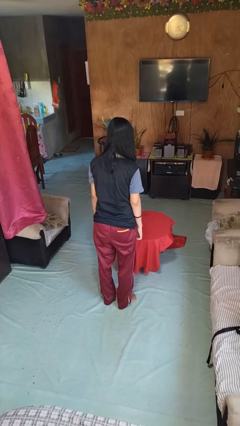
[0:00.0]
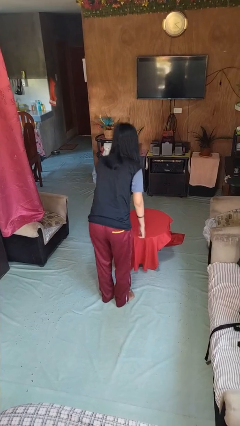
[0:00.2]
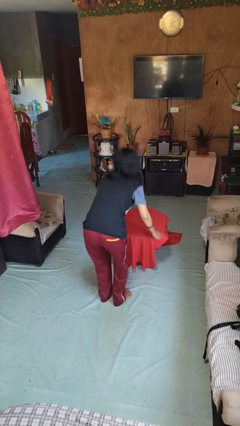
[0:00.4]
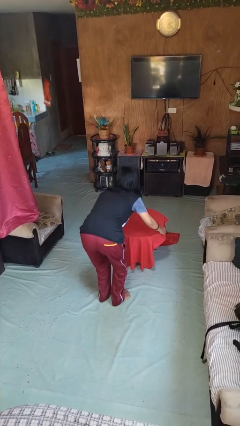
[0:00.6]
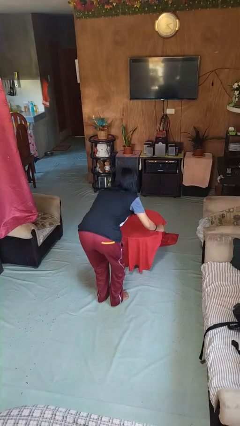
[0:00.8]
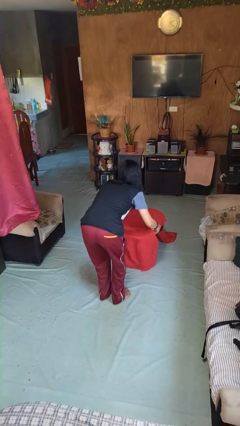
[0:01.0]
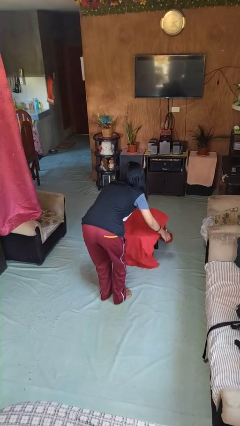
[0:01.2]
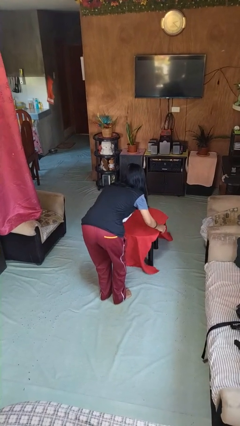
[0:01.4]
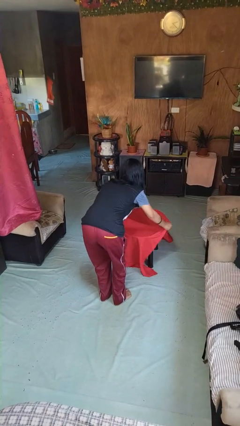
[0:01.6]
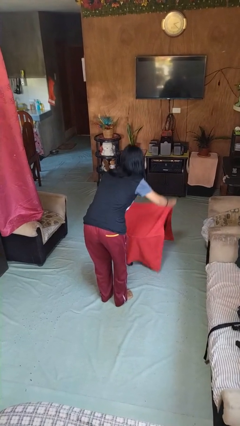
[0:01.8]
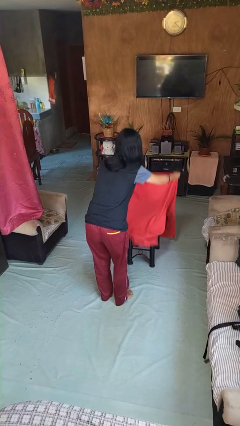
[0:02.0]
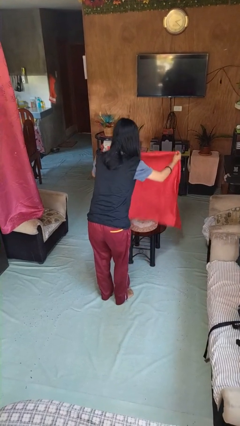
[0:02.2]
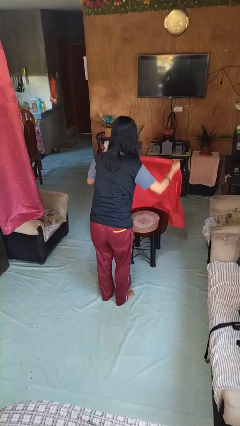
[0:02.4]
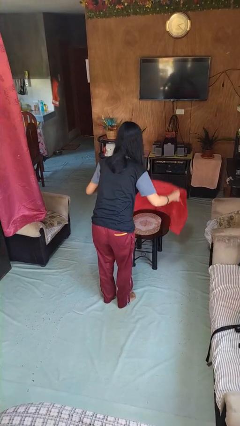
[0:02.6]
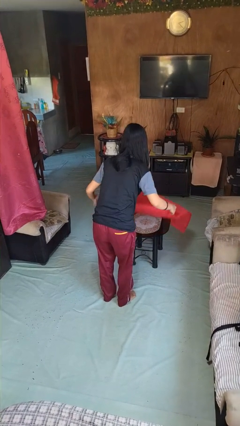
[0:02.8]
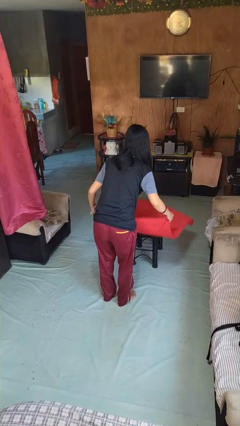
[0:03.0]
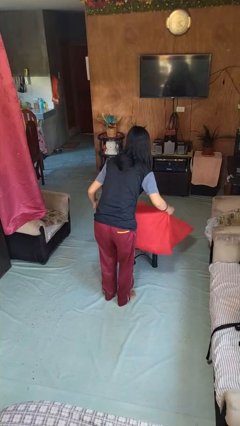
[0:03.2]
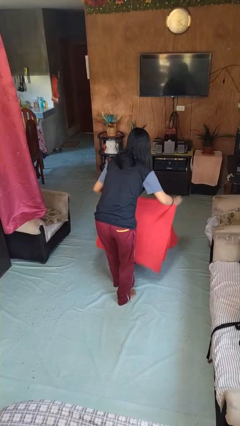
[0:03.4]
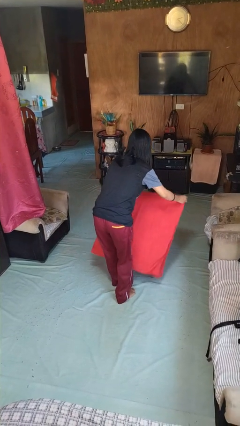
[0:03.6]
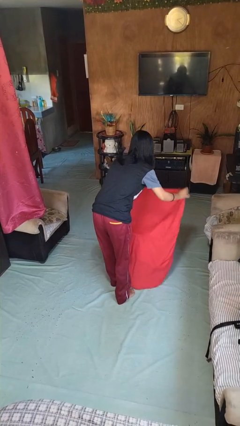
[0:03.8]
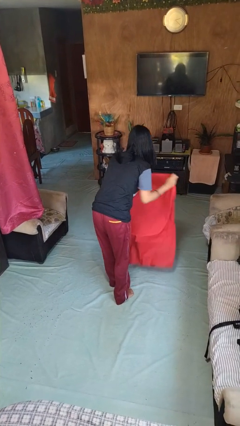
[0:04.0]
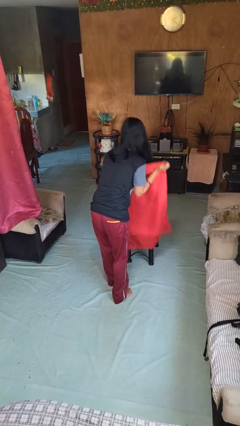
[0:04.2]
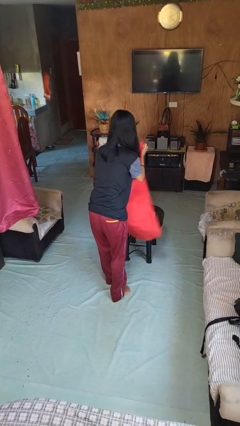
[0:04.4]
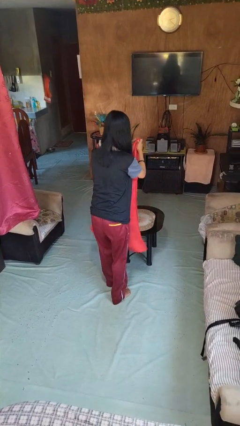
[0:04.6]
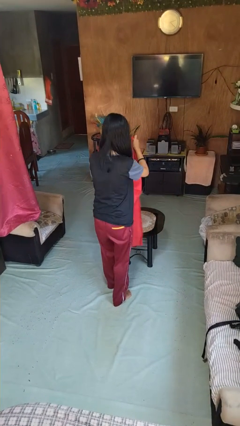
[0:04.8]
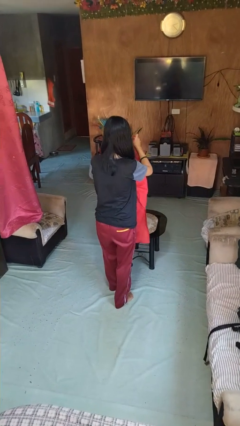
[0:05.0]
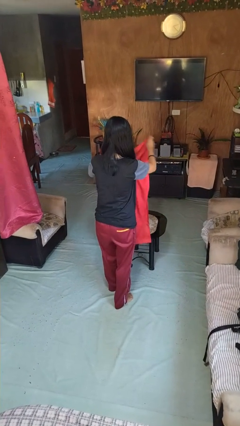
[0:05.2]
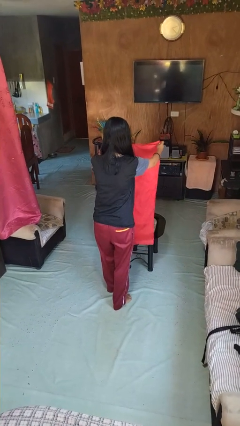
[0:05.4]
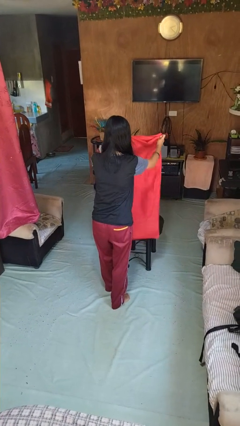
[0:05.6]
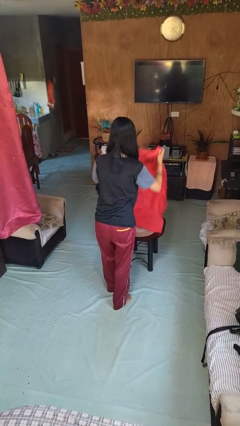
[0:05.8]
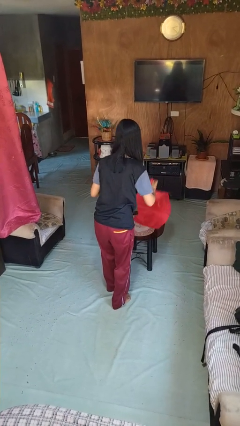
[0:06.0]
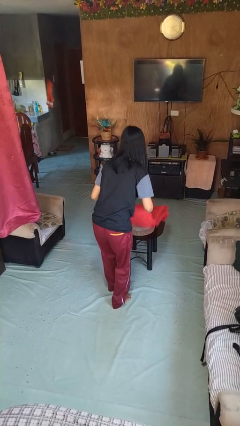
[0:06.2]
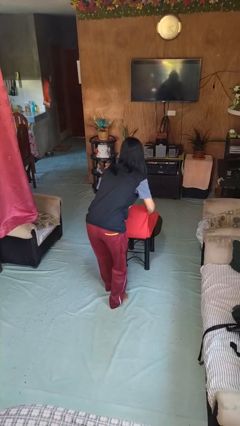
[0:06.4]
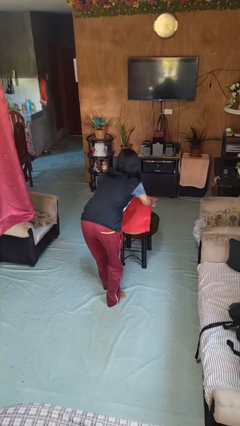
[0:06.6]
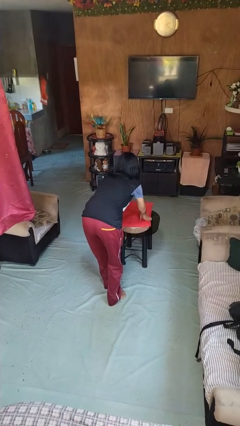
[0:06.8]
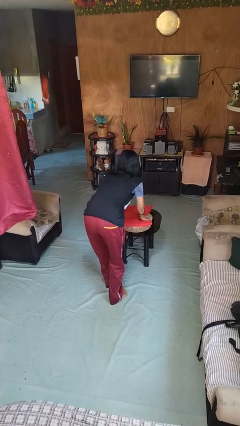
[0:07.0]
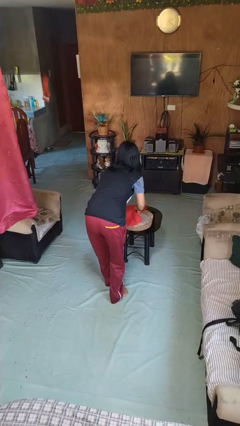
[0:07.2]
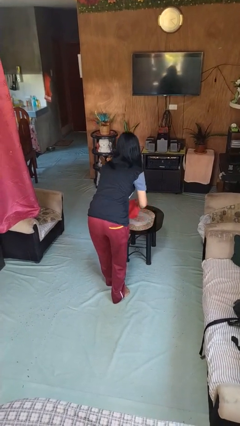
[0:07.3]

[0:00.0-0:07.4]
person folds tablecloth

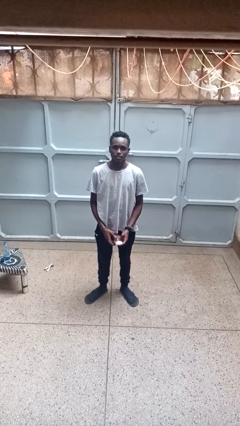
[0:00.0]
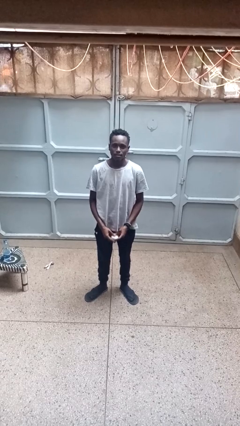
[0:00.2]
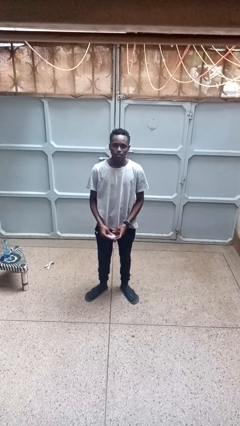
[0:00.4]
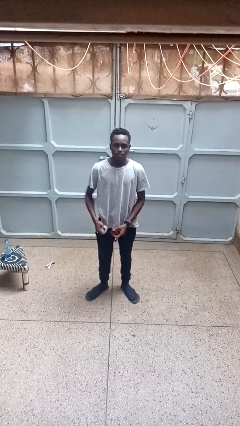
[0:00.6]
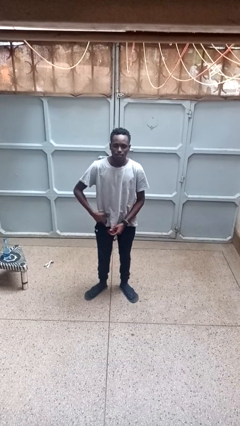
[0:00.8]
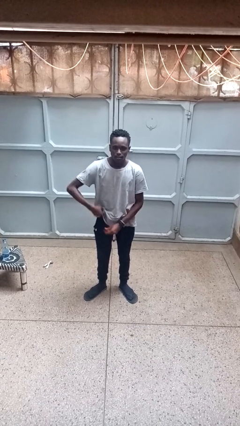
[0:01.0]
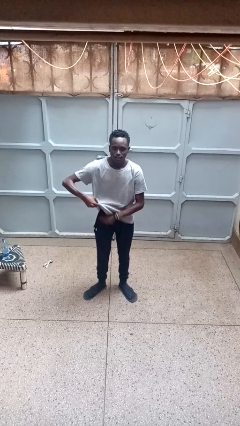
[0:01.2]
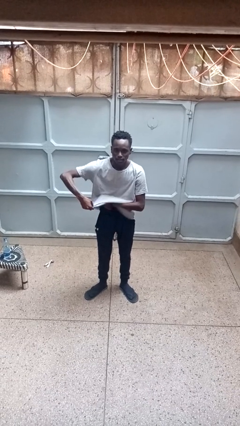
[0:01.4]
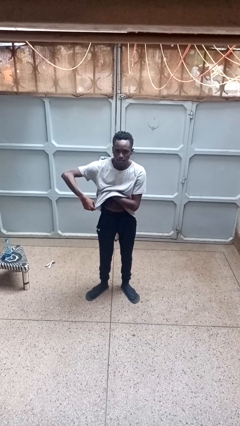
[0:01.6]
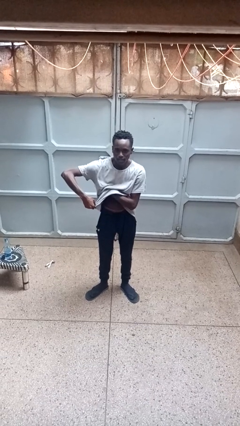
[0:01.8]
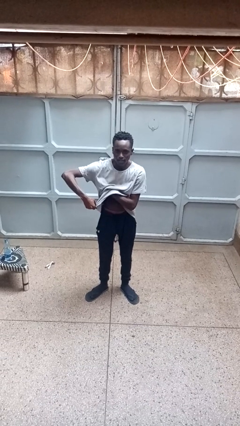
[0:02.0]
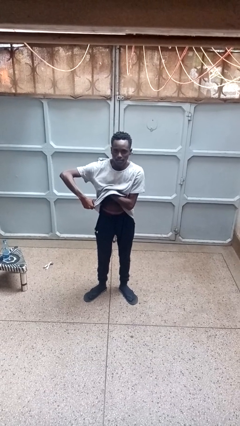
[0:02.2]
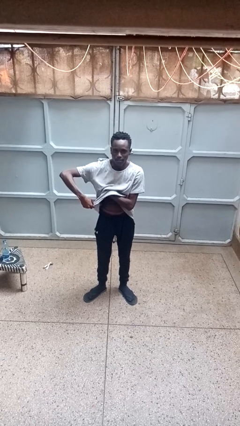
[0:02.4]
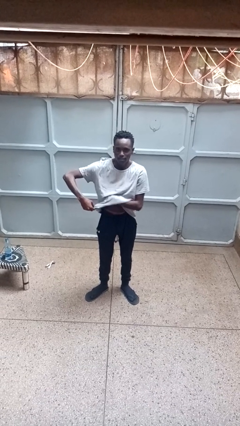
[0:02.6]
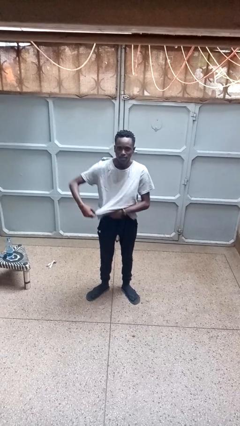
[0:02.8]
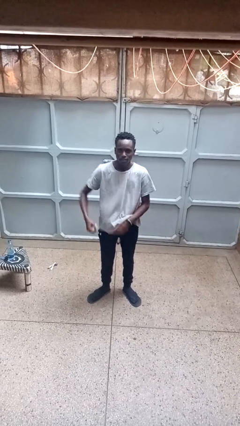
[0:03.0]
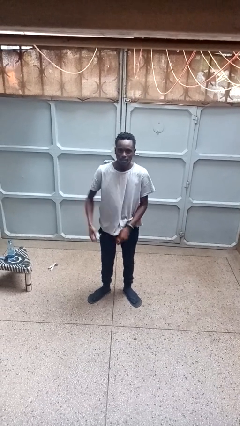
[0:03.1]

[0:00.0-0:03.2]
person applies deodorant

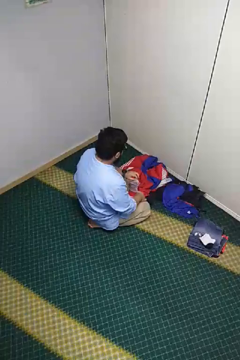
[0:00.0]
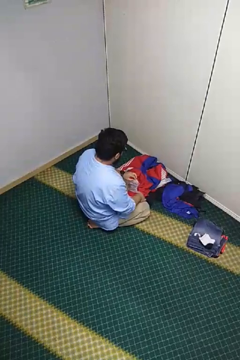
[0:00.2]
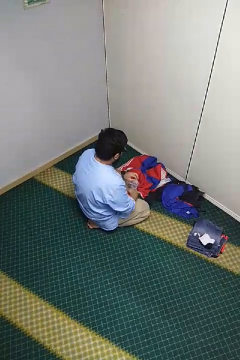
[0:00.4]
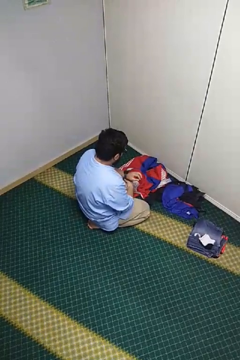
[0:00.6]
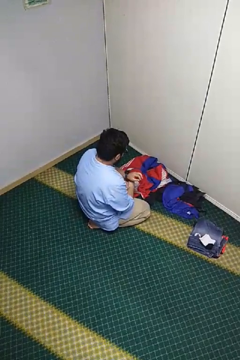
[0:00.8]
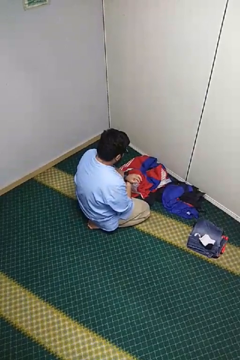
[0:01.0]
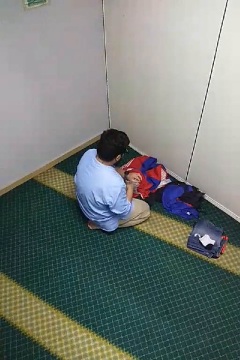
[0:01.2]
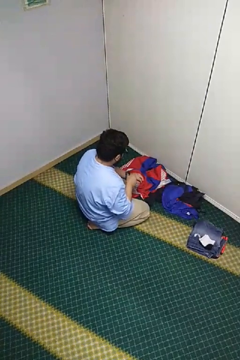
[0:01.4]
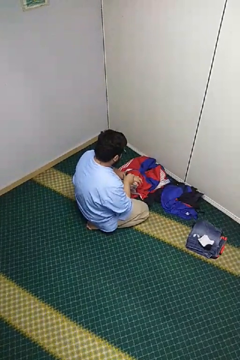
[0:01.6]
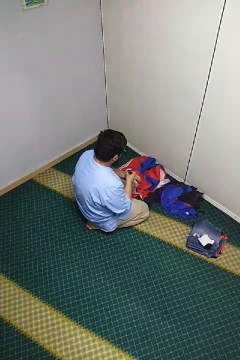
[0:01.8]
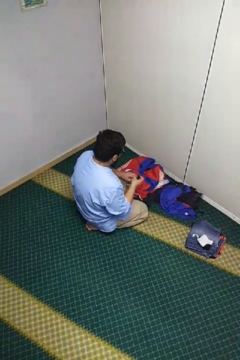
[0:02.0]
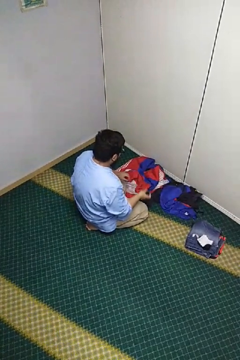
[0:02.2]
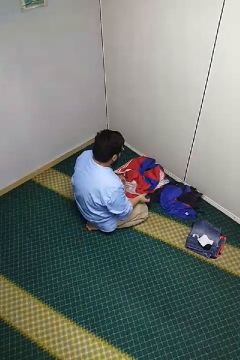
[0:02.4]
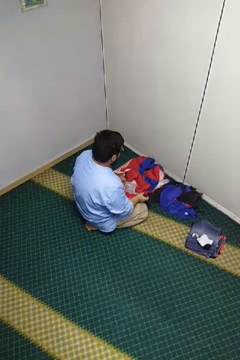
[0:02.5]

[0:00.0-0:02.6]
person takes off wristwatch

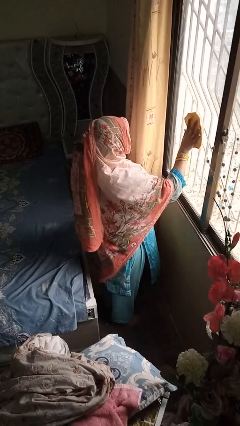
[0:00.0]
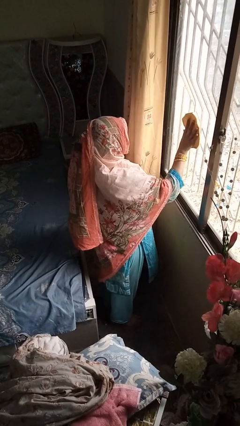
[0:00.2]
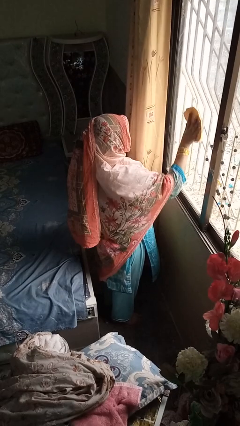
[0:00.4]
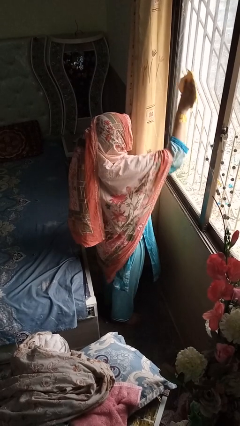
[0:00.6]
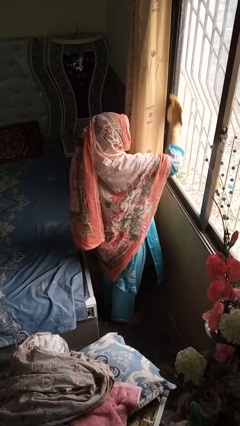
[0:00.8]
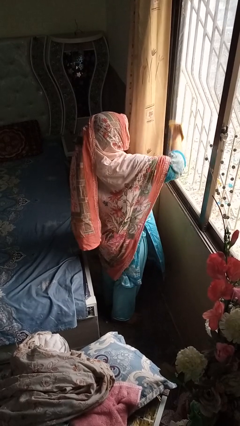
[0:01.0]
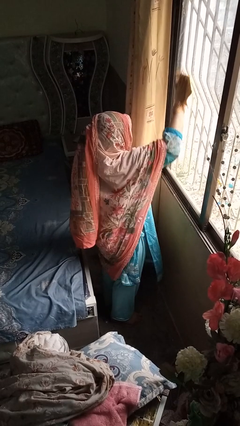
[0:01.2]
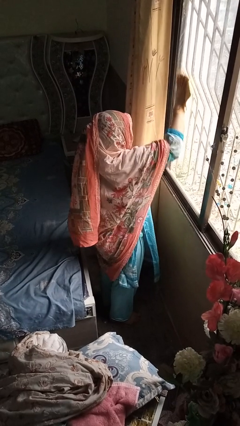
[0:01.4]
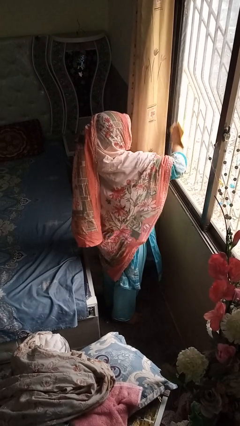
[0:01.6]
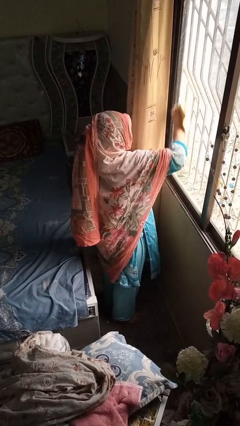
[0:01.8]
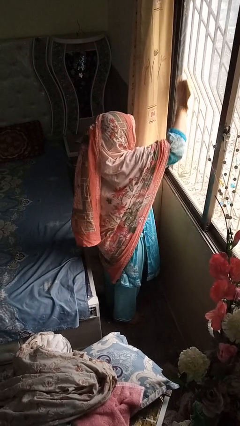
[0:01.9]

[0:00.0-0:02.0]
person washes window

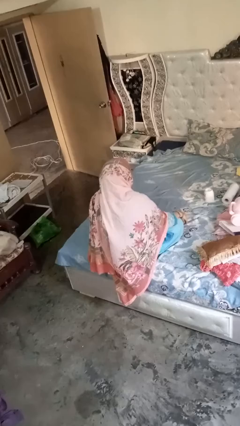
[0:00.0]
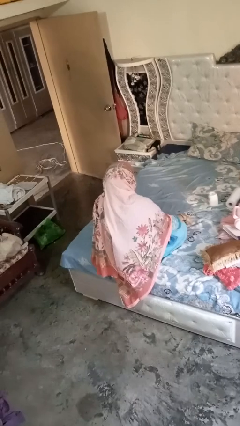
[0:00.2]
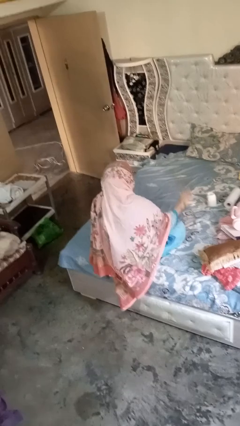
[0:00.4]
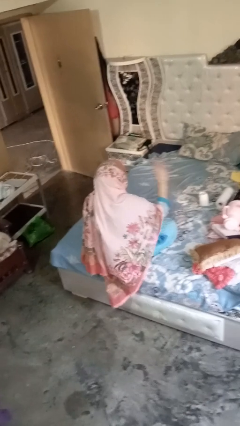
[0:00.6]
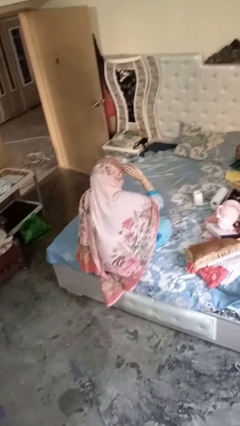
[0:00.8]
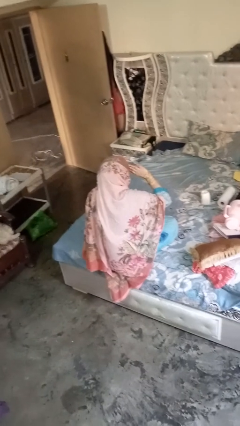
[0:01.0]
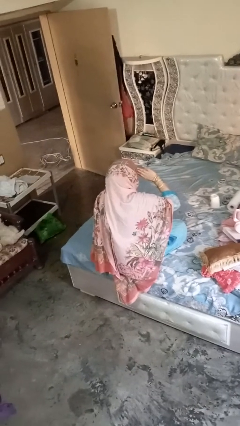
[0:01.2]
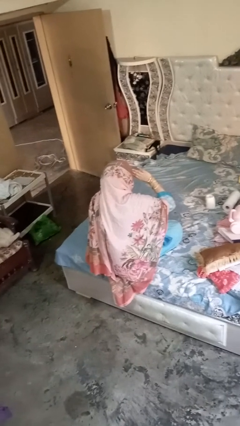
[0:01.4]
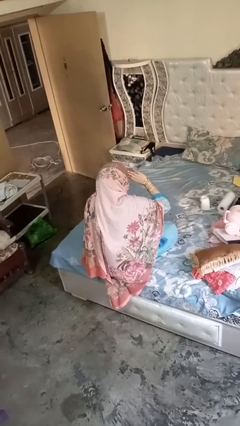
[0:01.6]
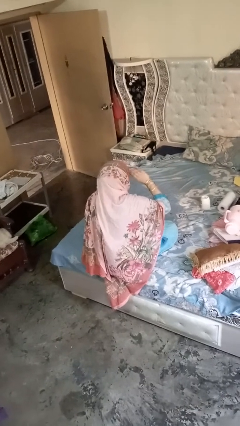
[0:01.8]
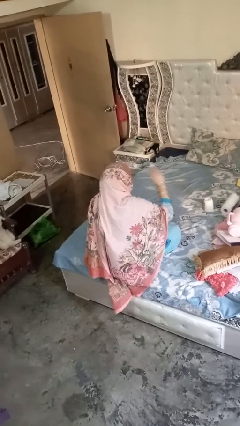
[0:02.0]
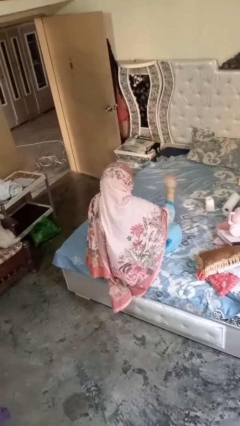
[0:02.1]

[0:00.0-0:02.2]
person salutes
